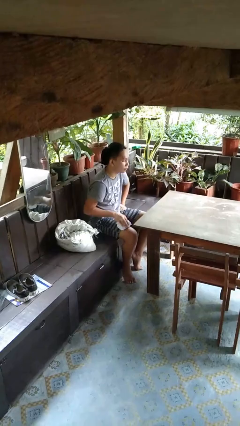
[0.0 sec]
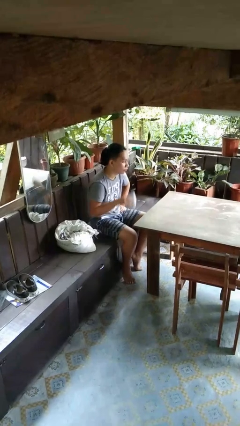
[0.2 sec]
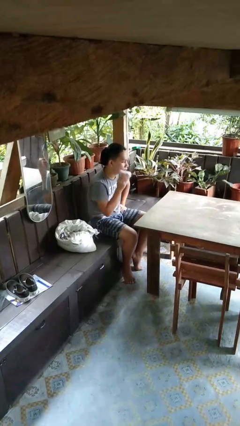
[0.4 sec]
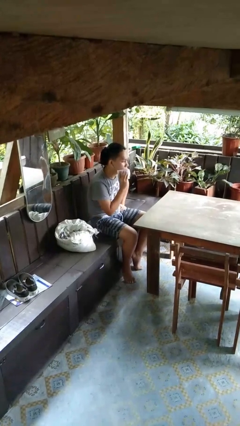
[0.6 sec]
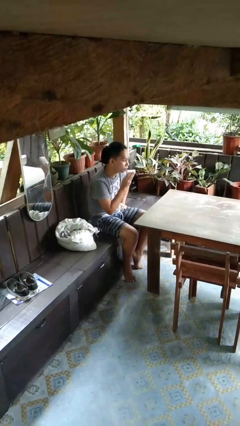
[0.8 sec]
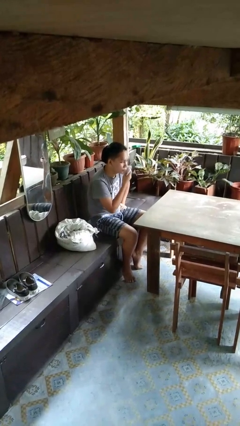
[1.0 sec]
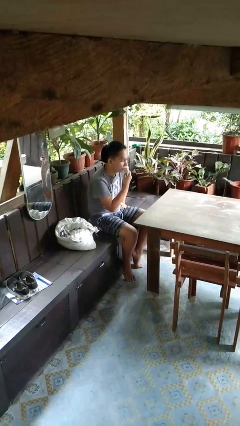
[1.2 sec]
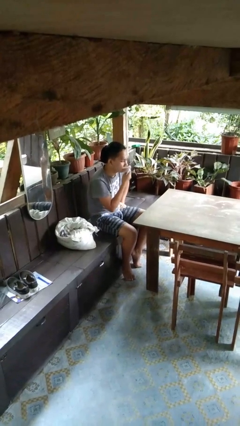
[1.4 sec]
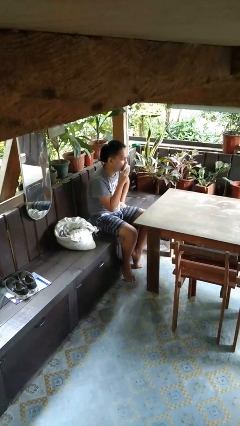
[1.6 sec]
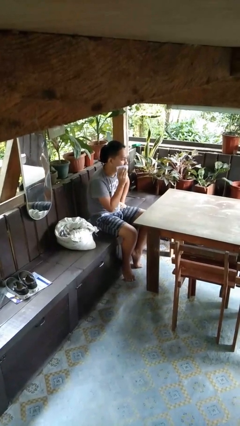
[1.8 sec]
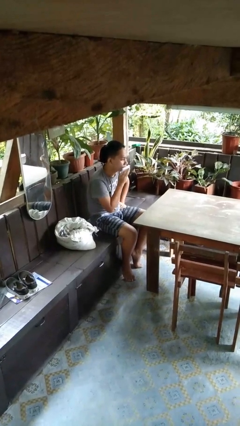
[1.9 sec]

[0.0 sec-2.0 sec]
person wipes mouth with napkin

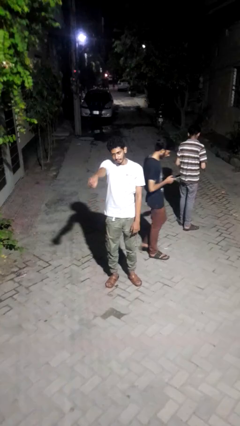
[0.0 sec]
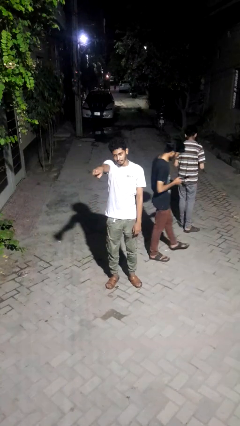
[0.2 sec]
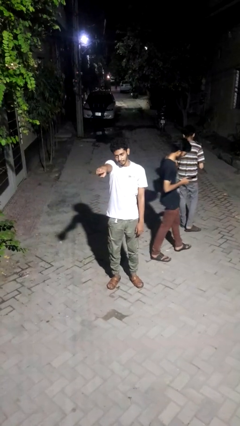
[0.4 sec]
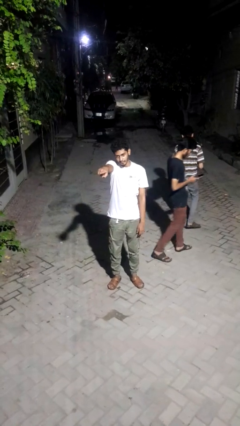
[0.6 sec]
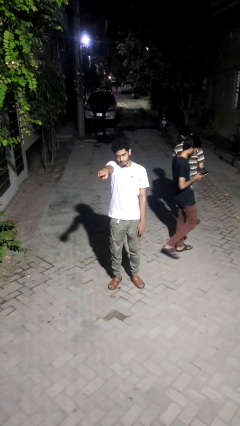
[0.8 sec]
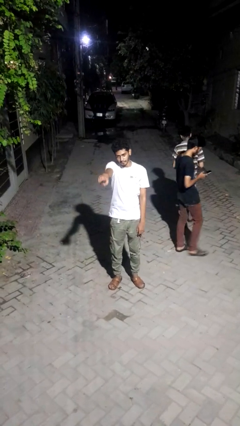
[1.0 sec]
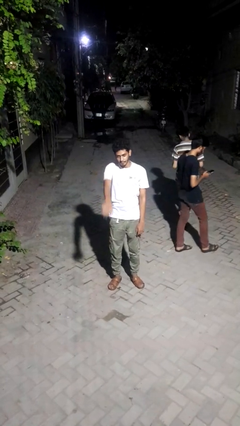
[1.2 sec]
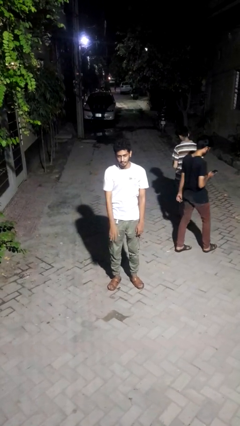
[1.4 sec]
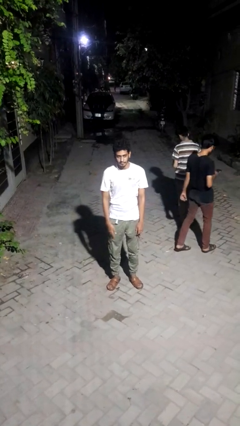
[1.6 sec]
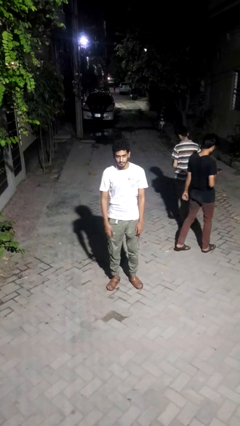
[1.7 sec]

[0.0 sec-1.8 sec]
person points at person

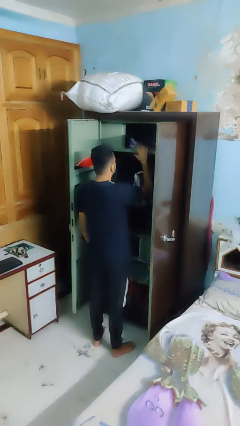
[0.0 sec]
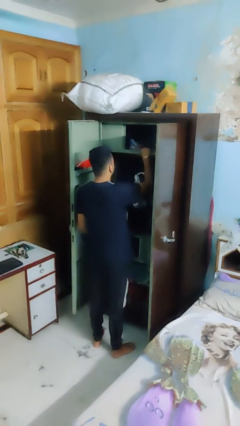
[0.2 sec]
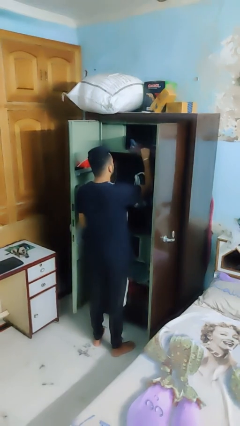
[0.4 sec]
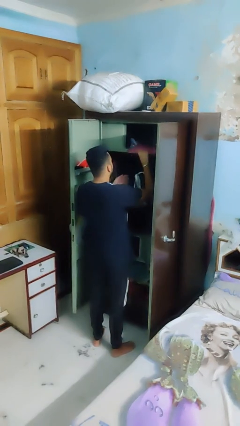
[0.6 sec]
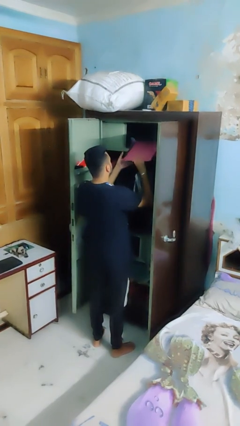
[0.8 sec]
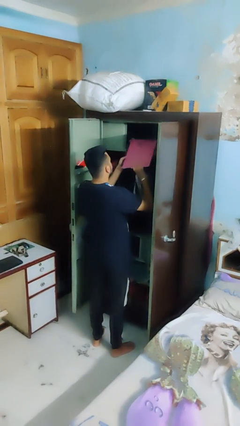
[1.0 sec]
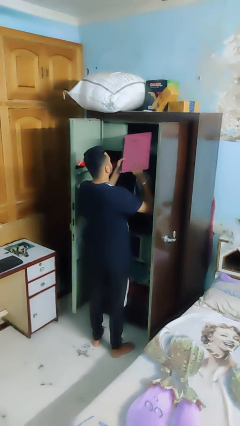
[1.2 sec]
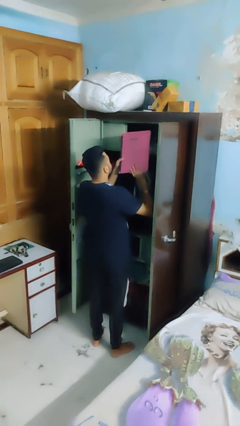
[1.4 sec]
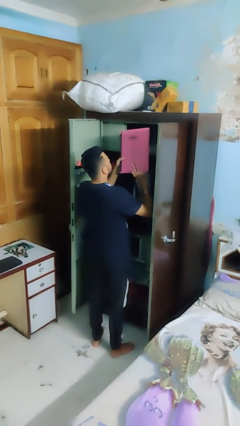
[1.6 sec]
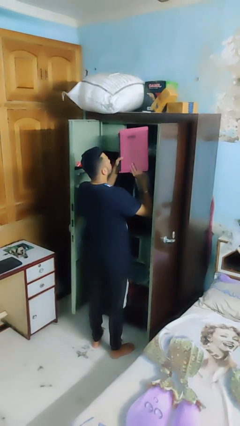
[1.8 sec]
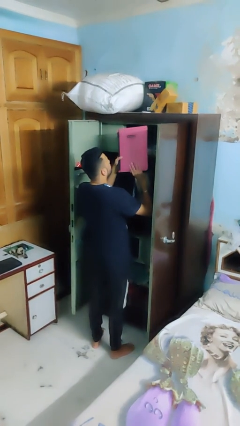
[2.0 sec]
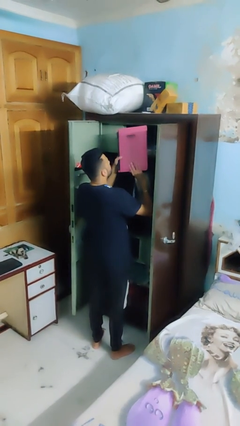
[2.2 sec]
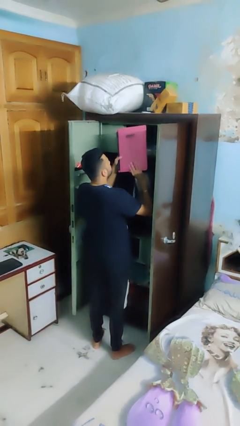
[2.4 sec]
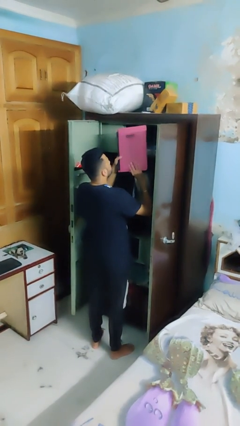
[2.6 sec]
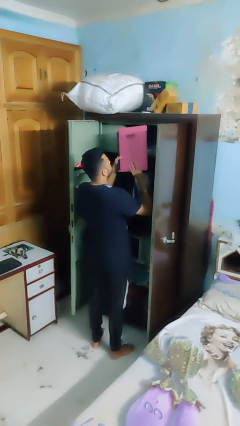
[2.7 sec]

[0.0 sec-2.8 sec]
person picks up object from shelf

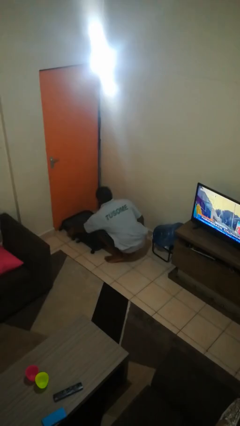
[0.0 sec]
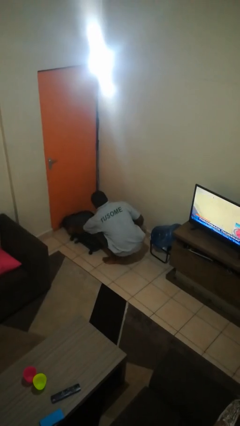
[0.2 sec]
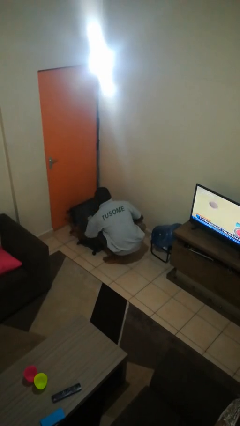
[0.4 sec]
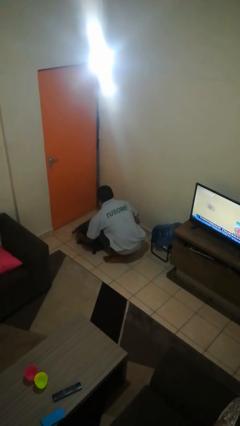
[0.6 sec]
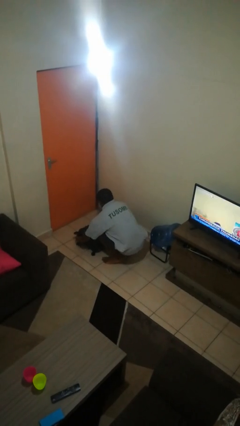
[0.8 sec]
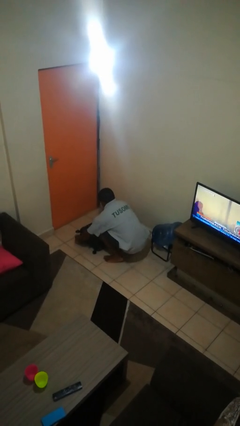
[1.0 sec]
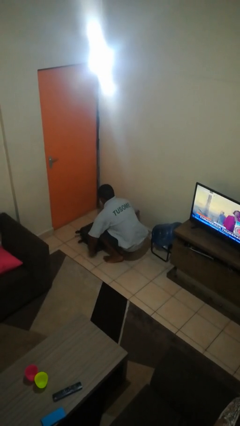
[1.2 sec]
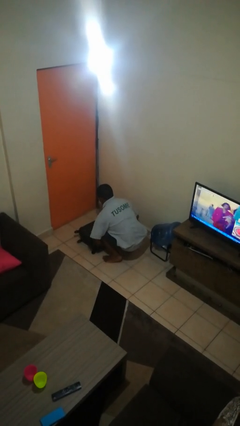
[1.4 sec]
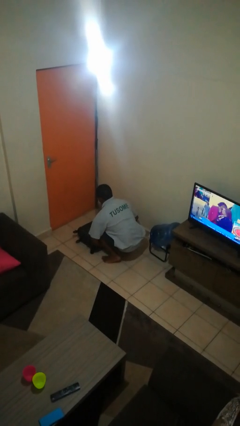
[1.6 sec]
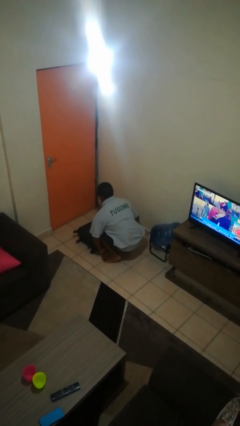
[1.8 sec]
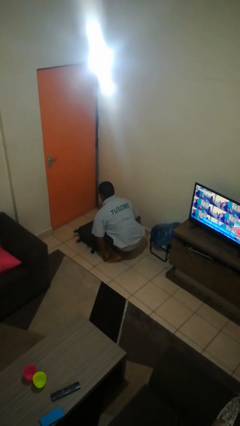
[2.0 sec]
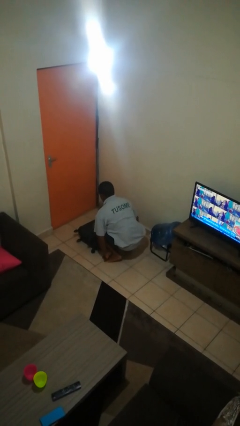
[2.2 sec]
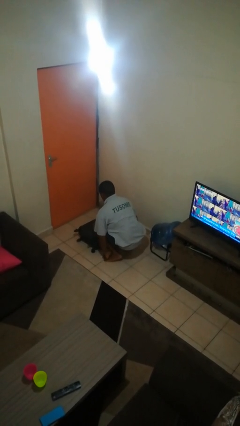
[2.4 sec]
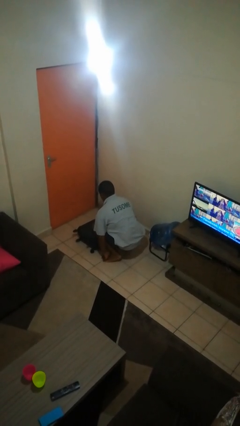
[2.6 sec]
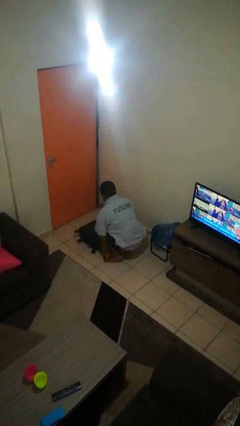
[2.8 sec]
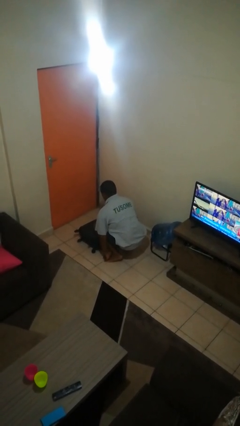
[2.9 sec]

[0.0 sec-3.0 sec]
person closes suitcase

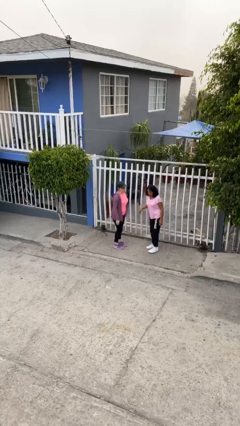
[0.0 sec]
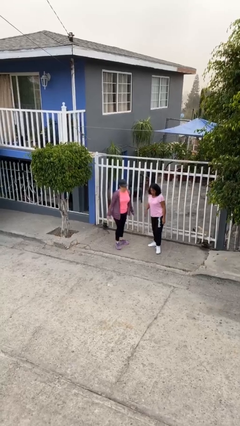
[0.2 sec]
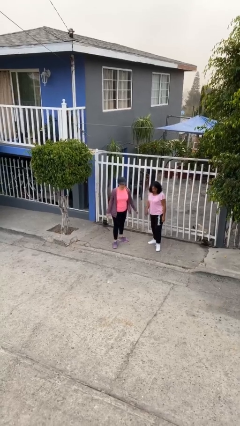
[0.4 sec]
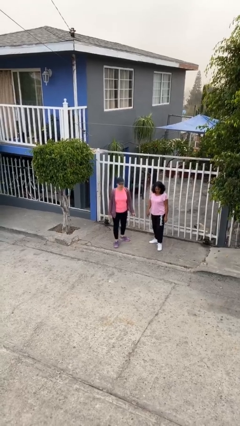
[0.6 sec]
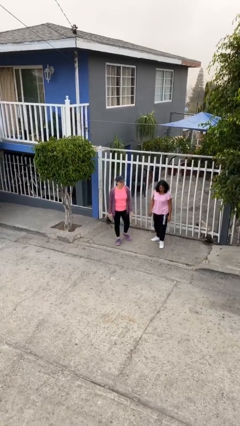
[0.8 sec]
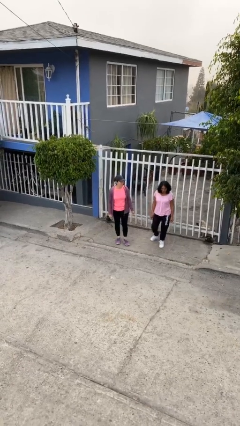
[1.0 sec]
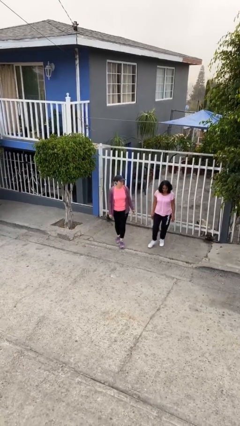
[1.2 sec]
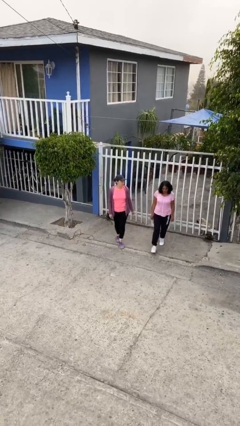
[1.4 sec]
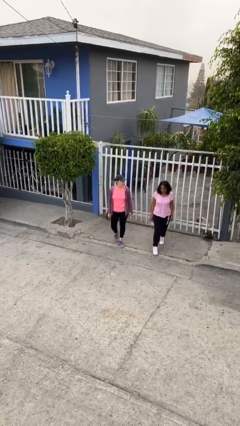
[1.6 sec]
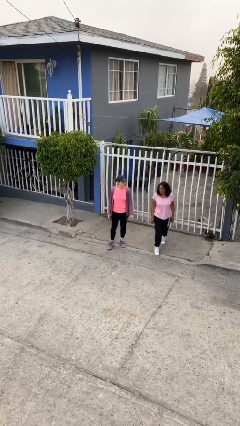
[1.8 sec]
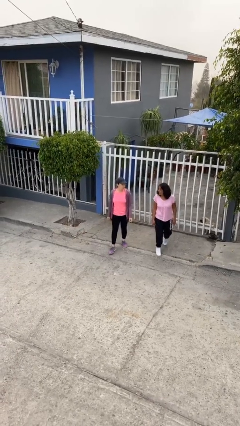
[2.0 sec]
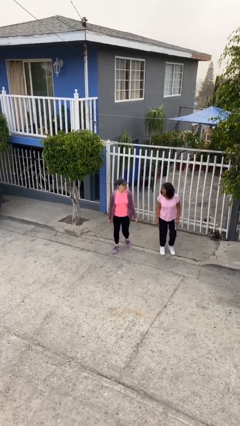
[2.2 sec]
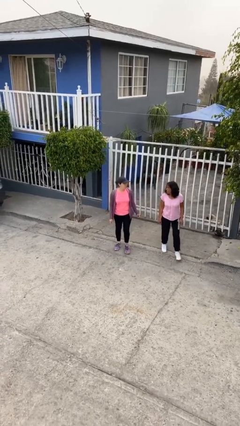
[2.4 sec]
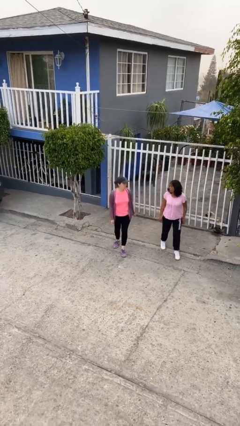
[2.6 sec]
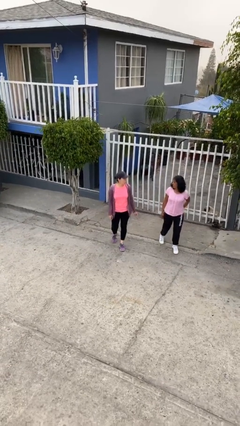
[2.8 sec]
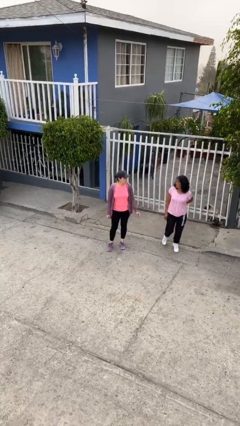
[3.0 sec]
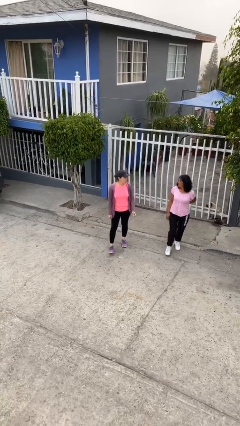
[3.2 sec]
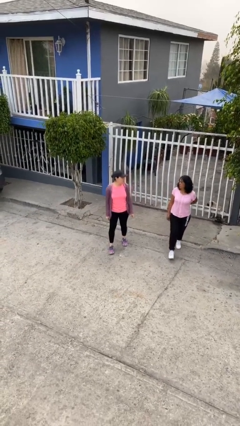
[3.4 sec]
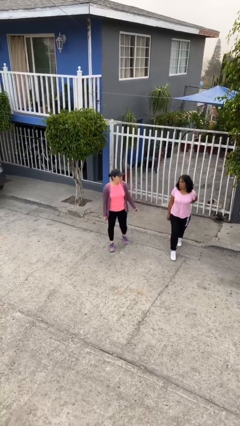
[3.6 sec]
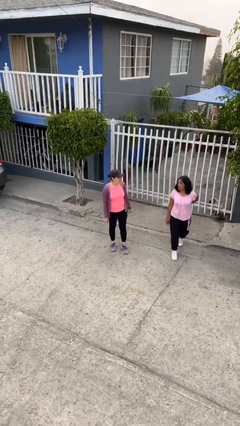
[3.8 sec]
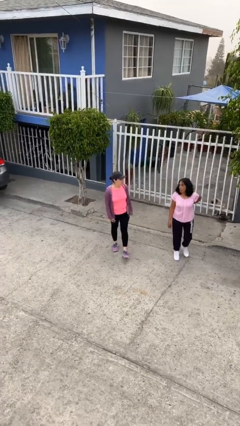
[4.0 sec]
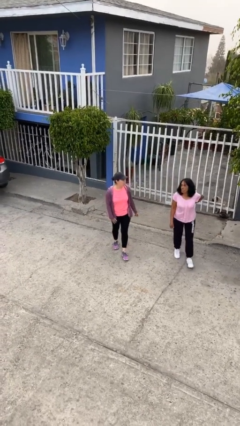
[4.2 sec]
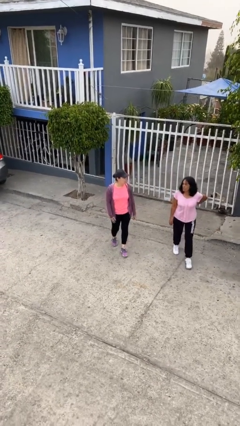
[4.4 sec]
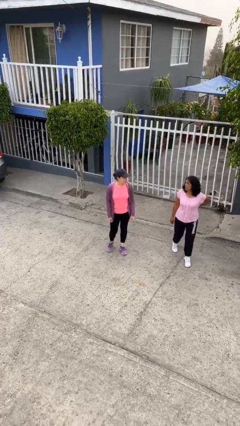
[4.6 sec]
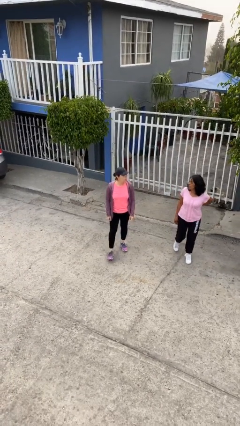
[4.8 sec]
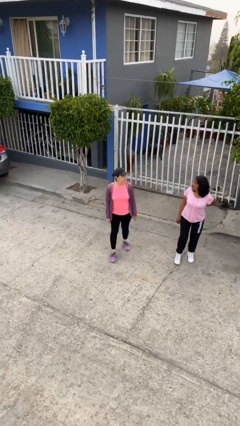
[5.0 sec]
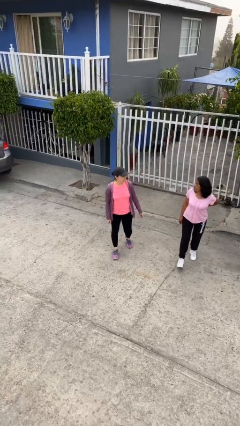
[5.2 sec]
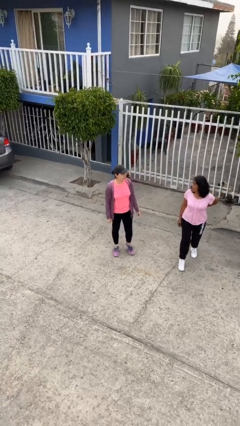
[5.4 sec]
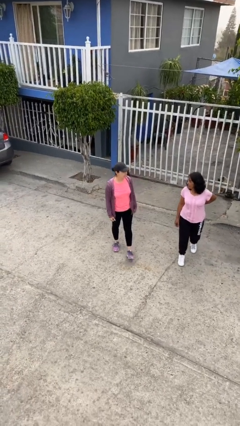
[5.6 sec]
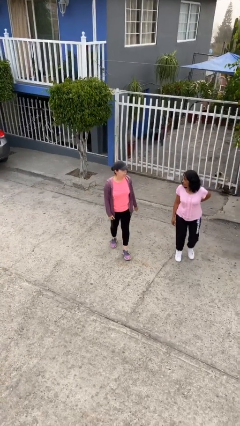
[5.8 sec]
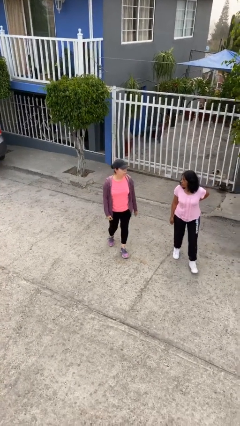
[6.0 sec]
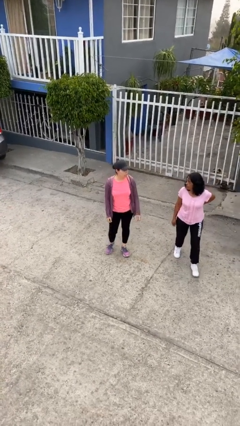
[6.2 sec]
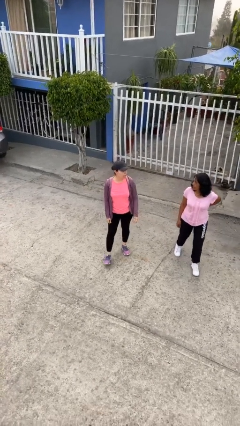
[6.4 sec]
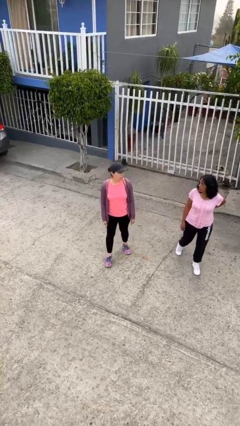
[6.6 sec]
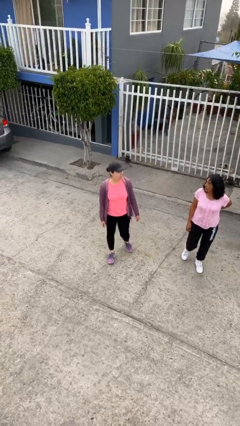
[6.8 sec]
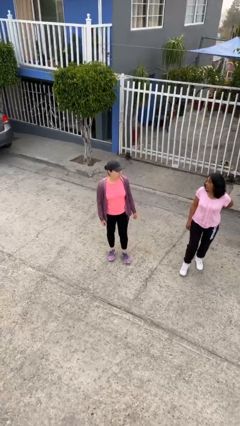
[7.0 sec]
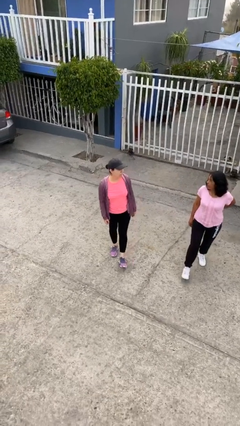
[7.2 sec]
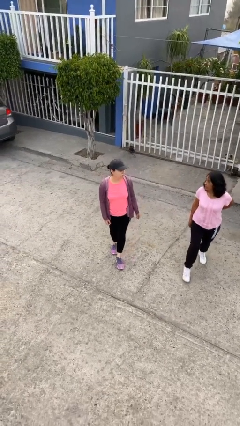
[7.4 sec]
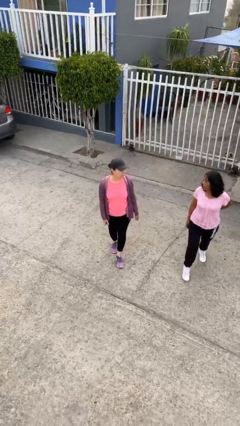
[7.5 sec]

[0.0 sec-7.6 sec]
person talks to person

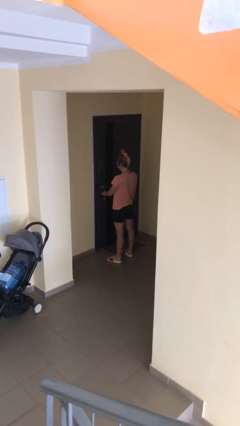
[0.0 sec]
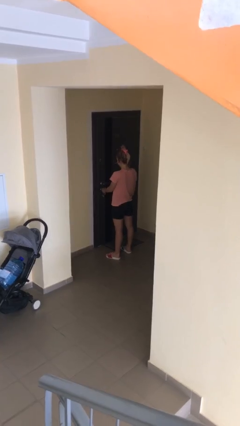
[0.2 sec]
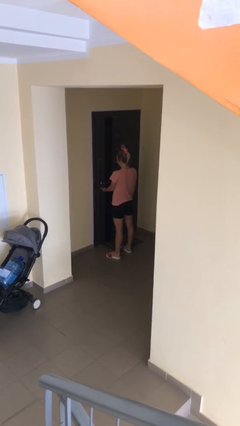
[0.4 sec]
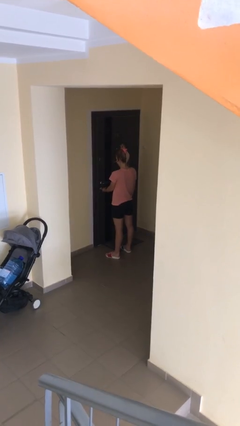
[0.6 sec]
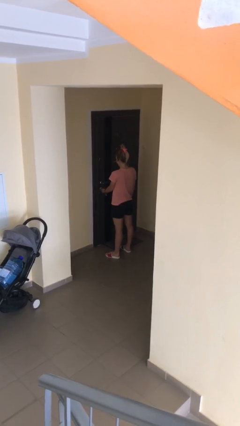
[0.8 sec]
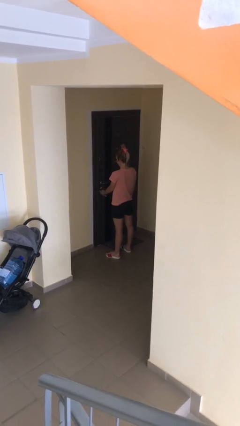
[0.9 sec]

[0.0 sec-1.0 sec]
person locks door with keys
